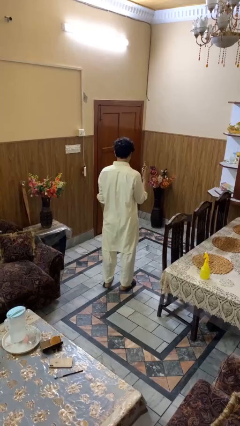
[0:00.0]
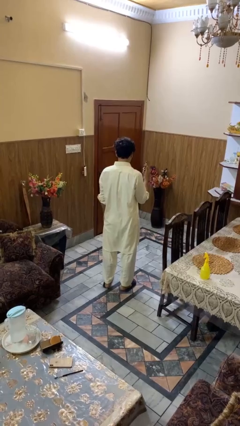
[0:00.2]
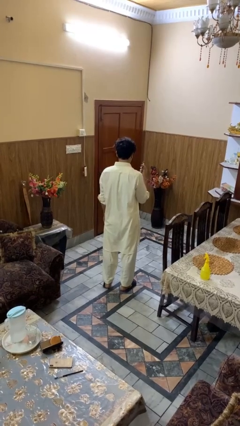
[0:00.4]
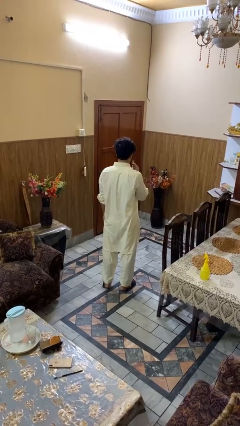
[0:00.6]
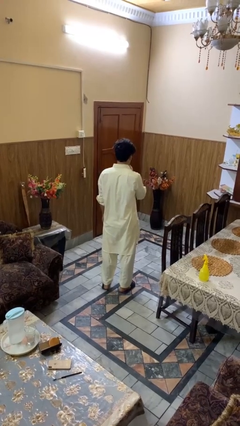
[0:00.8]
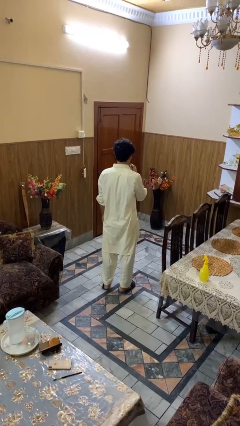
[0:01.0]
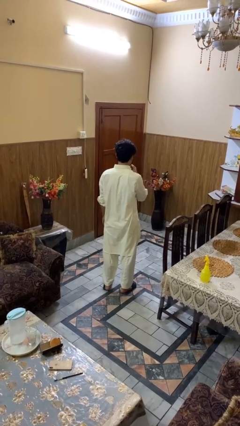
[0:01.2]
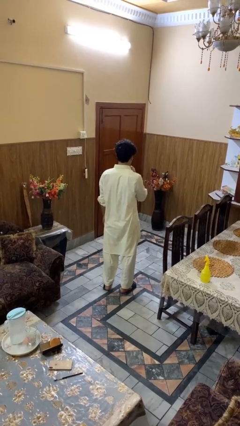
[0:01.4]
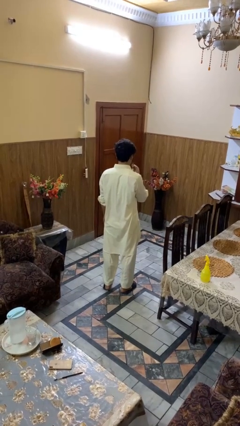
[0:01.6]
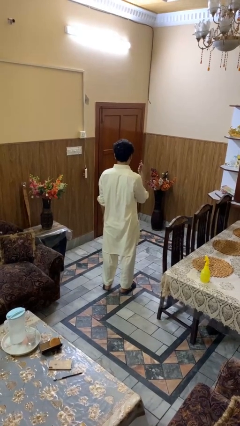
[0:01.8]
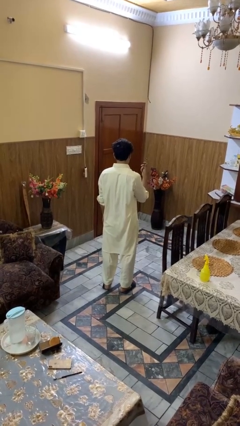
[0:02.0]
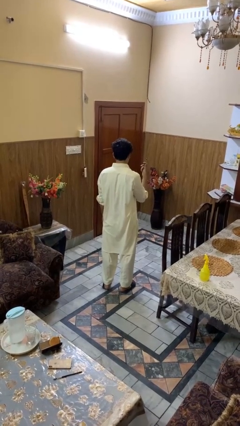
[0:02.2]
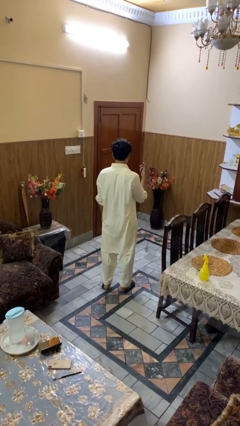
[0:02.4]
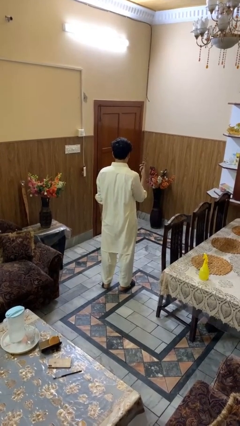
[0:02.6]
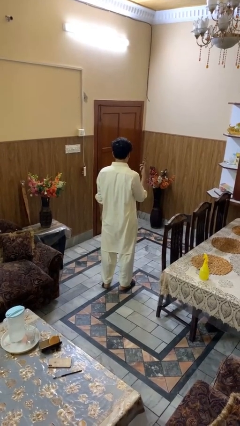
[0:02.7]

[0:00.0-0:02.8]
person applies lip makeup

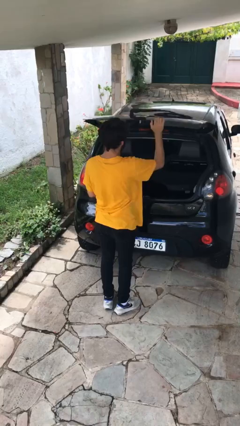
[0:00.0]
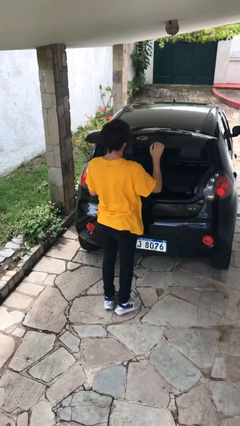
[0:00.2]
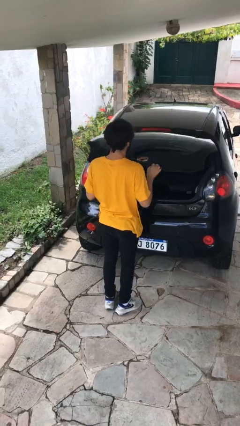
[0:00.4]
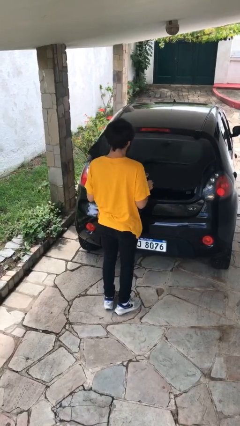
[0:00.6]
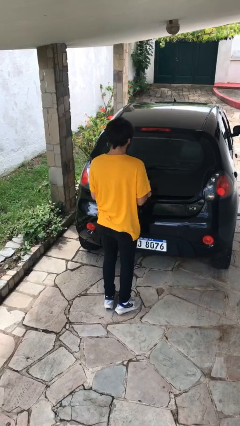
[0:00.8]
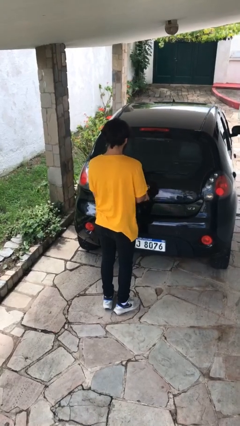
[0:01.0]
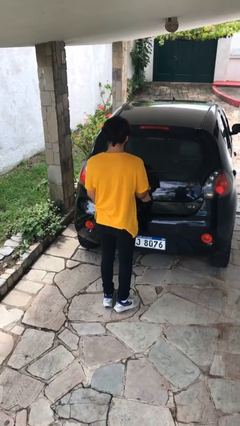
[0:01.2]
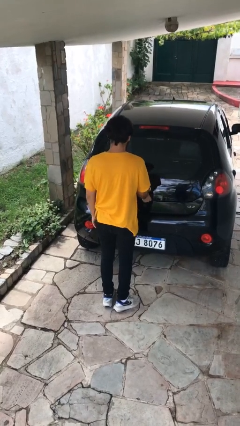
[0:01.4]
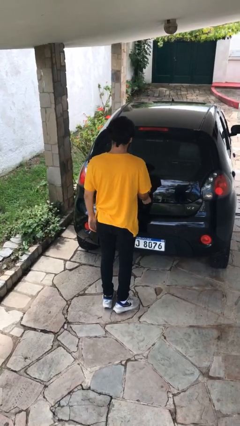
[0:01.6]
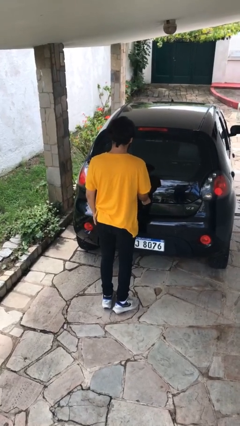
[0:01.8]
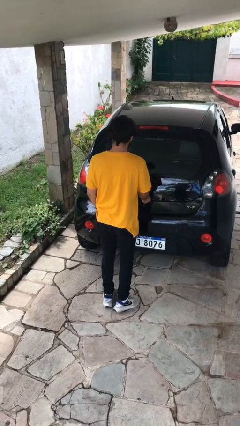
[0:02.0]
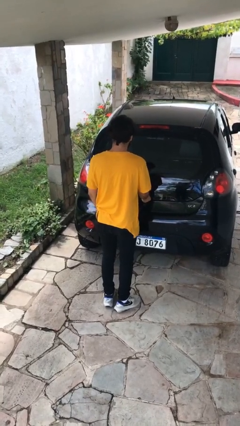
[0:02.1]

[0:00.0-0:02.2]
person closes car trunk

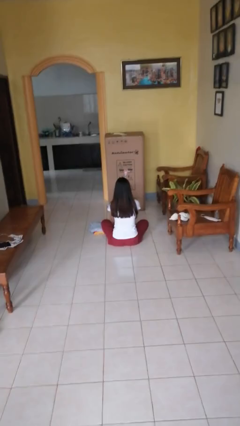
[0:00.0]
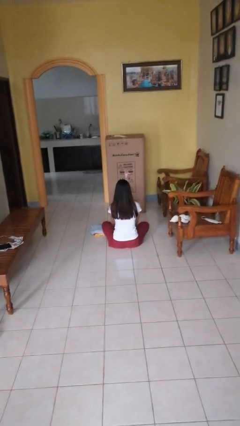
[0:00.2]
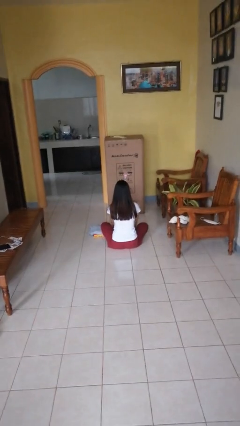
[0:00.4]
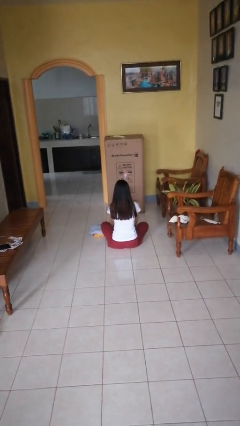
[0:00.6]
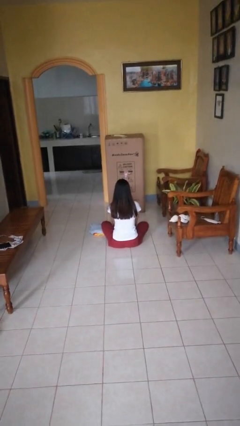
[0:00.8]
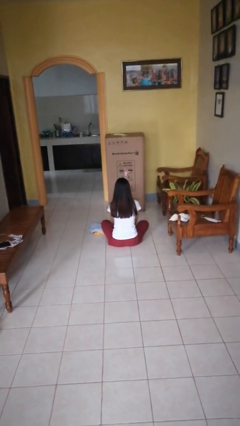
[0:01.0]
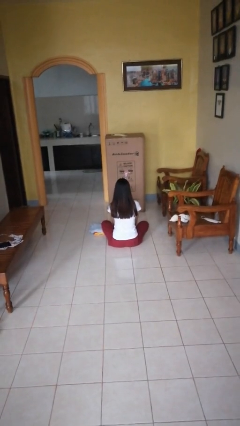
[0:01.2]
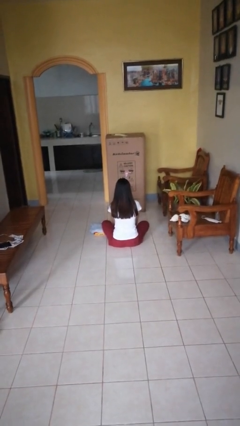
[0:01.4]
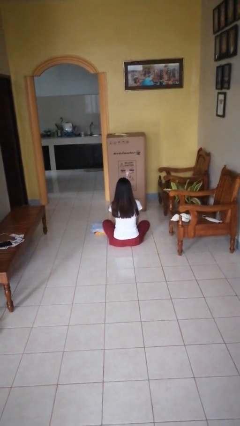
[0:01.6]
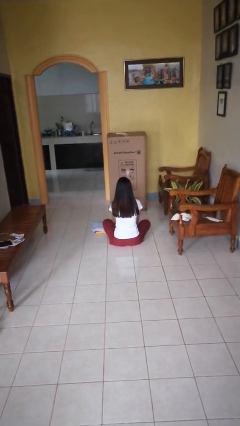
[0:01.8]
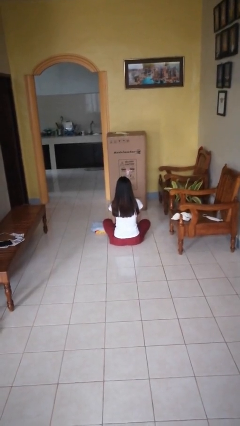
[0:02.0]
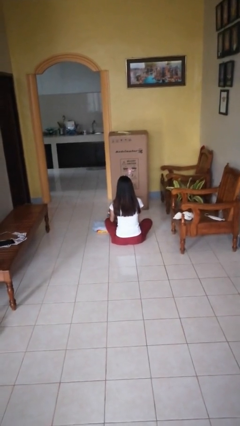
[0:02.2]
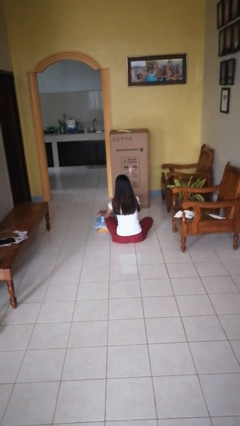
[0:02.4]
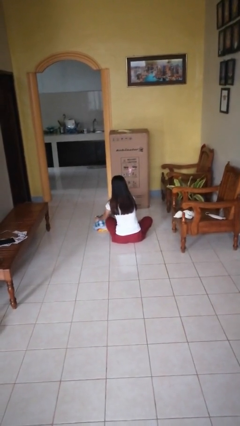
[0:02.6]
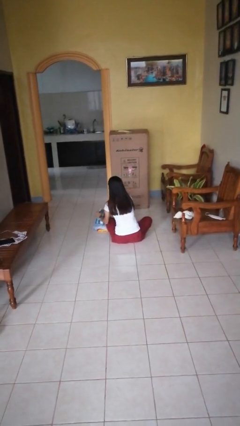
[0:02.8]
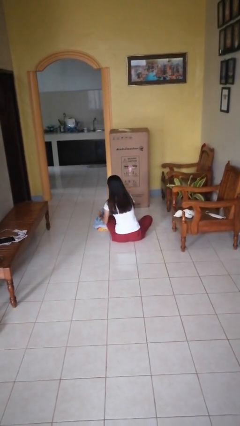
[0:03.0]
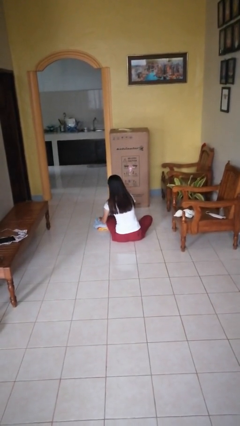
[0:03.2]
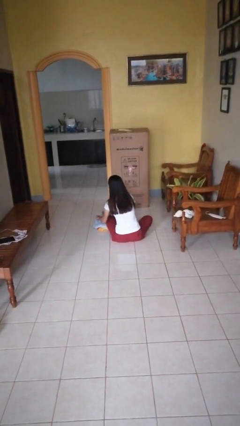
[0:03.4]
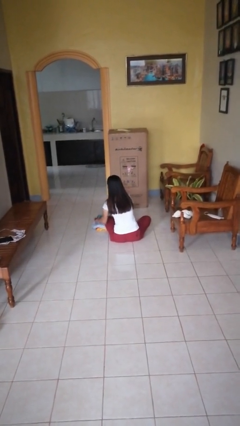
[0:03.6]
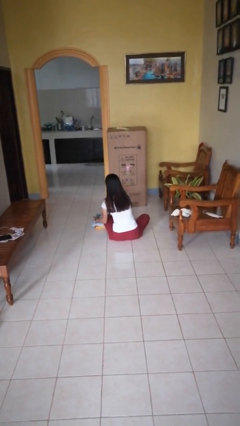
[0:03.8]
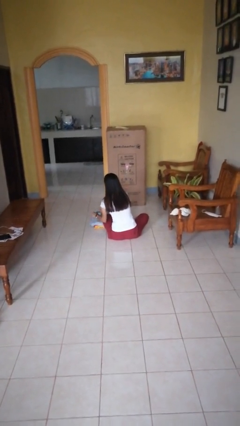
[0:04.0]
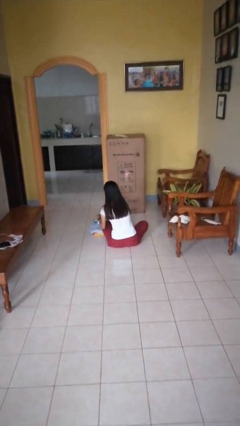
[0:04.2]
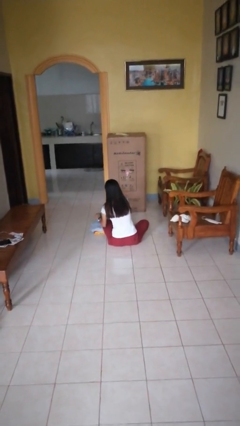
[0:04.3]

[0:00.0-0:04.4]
person folds towel

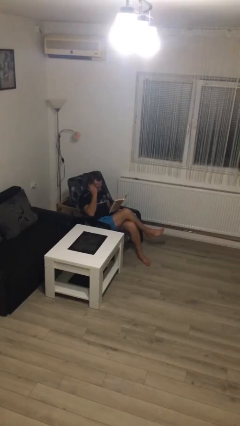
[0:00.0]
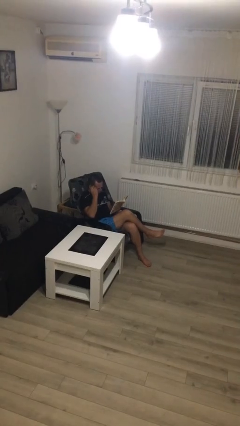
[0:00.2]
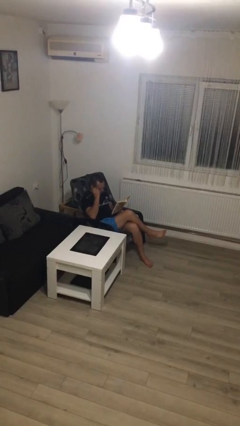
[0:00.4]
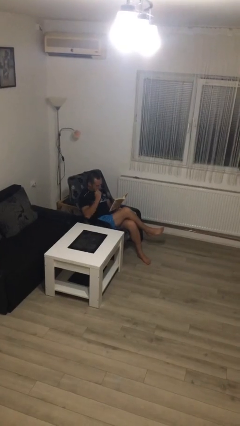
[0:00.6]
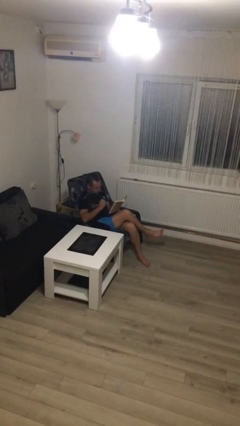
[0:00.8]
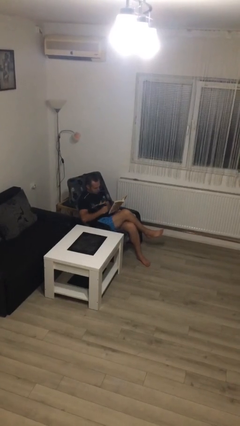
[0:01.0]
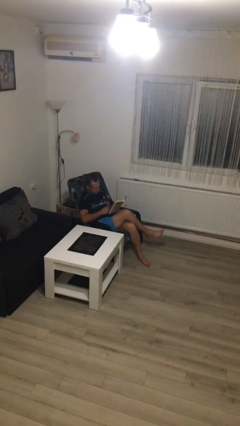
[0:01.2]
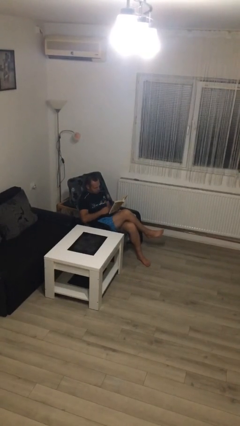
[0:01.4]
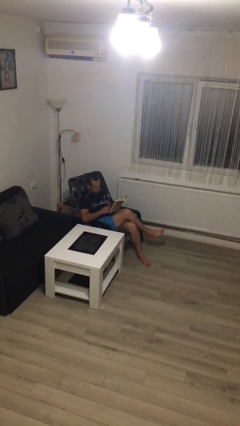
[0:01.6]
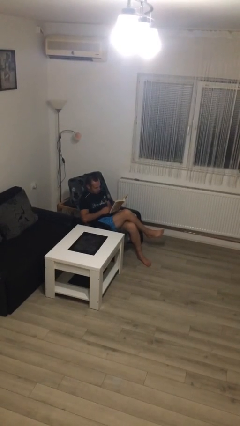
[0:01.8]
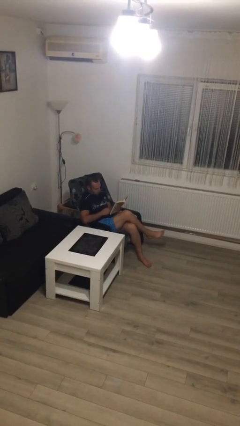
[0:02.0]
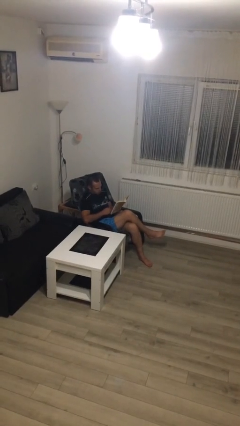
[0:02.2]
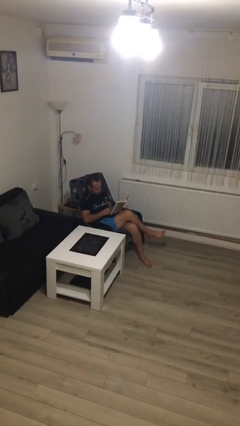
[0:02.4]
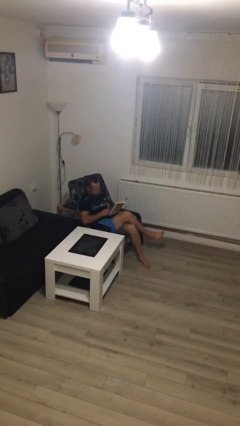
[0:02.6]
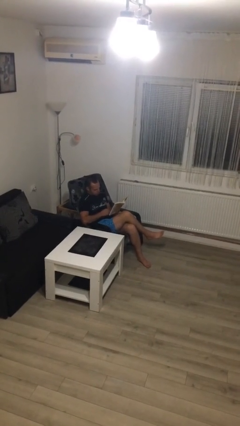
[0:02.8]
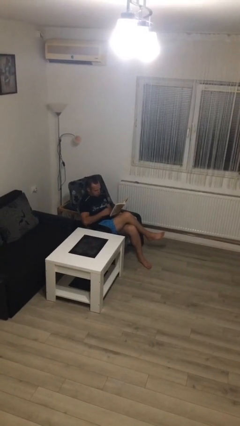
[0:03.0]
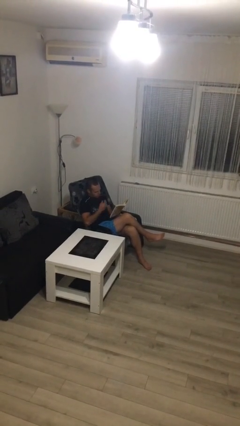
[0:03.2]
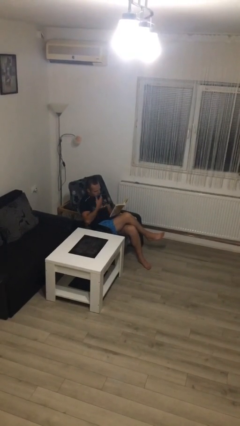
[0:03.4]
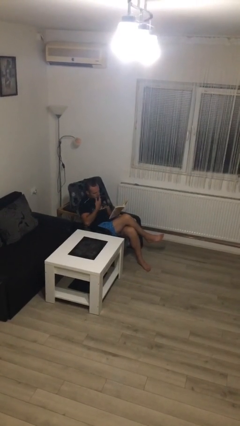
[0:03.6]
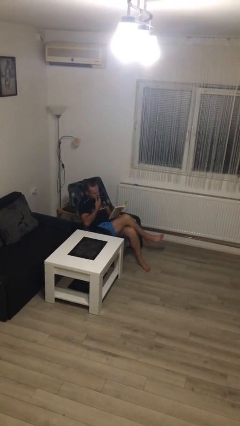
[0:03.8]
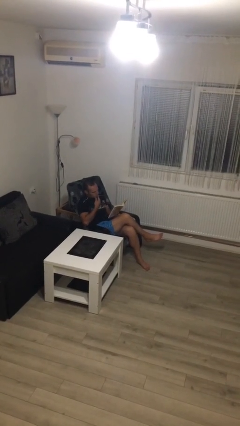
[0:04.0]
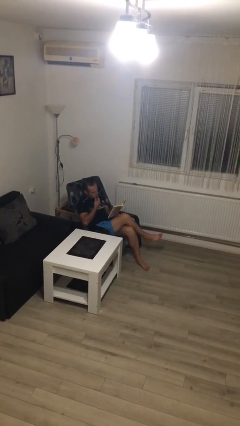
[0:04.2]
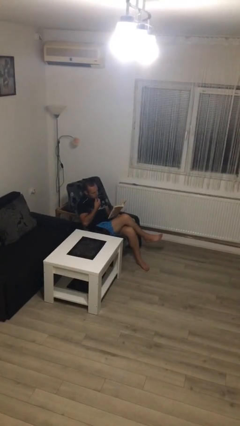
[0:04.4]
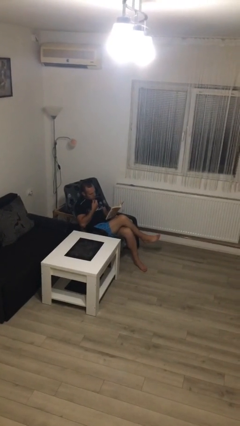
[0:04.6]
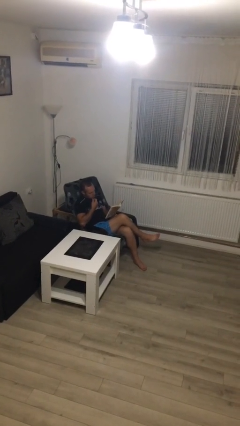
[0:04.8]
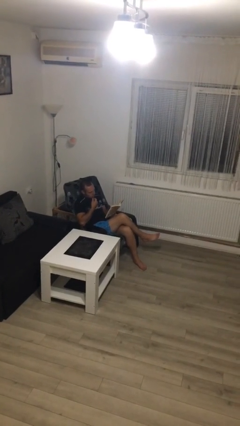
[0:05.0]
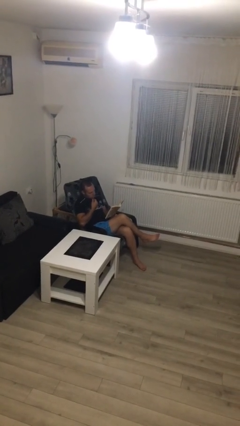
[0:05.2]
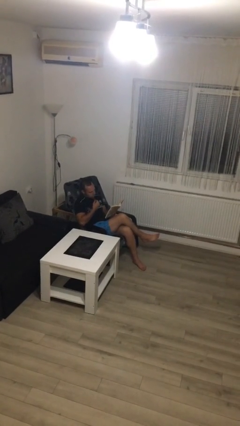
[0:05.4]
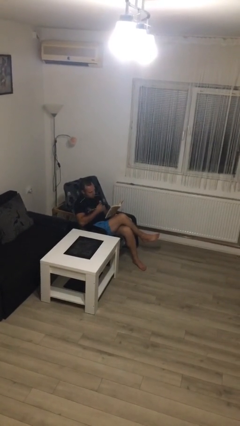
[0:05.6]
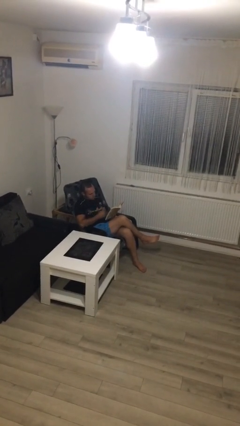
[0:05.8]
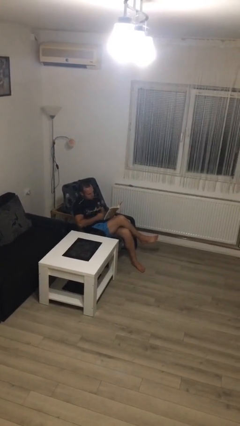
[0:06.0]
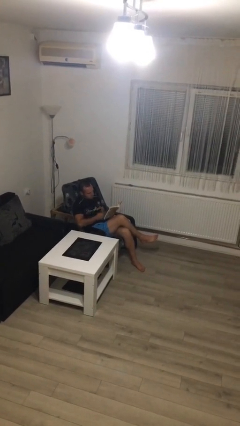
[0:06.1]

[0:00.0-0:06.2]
person reads document

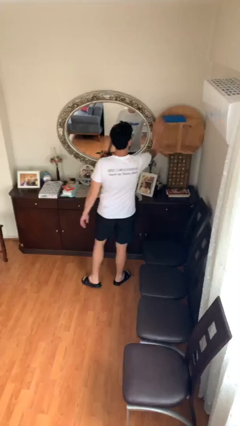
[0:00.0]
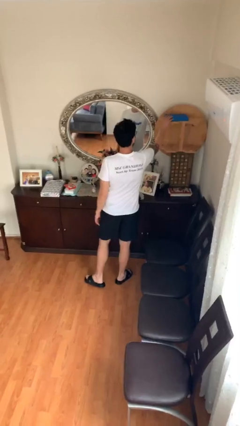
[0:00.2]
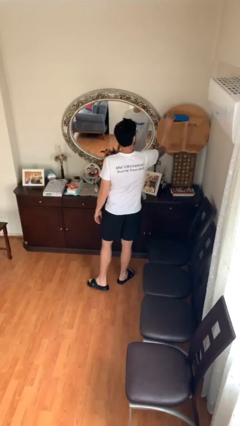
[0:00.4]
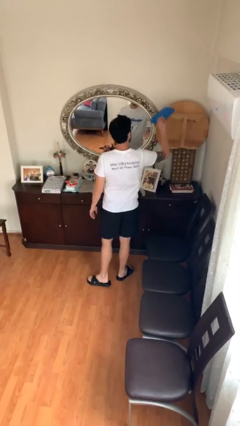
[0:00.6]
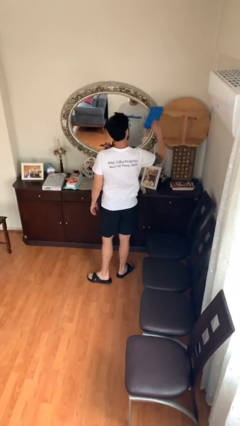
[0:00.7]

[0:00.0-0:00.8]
person picks up object from shelf

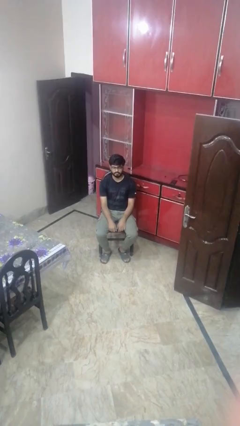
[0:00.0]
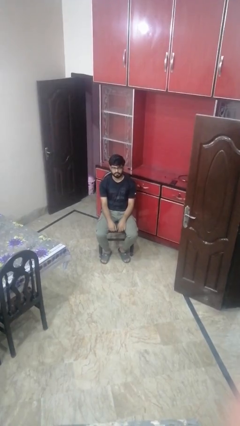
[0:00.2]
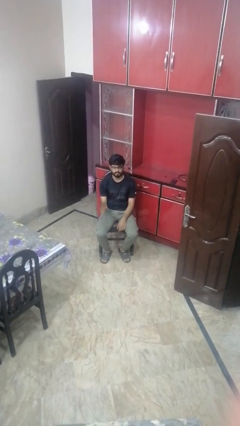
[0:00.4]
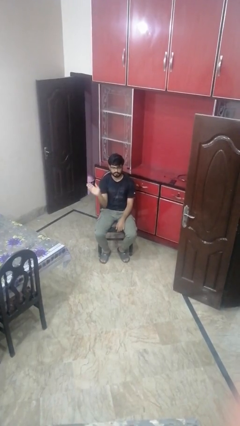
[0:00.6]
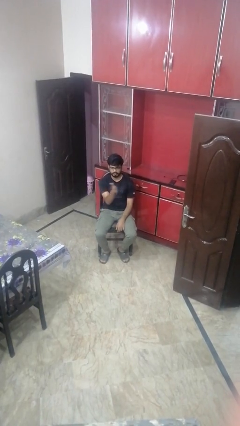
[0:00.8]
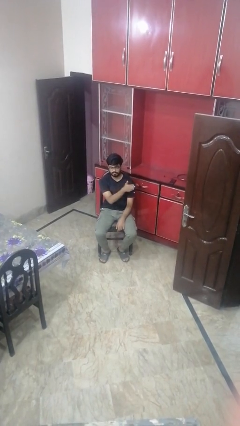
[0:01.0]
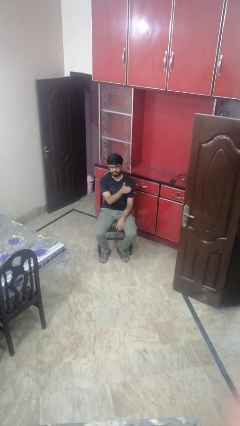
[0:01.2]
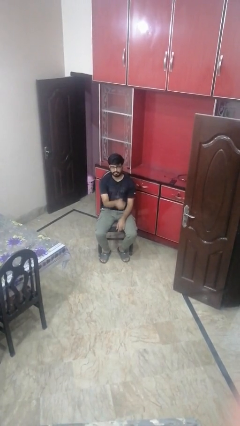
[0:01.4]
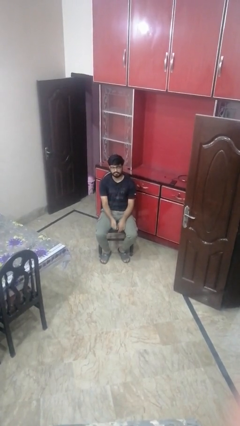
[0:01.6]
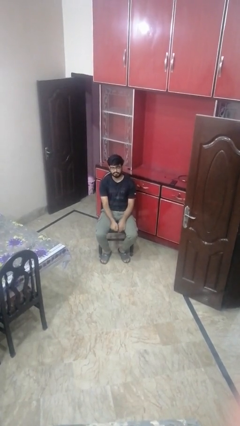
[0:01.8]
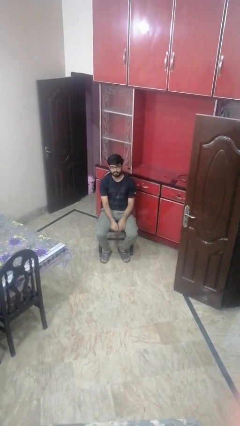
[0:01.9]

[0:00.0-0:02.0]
person gestures swipe left
